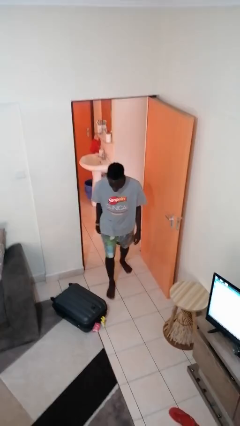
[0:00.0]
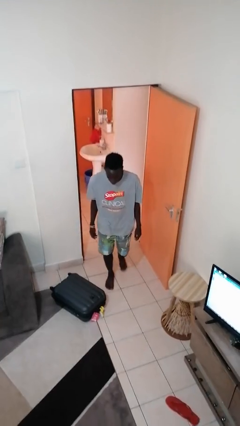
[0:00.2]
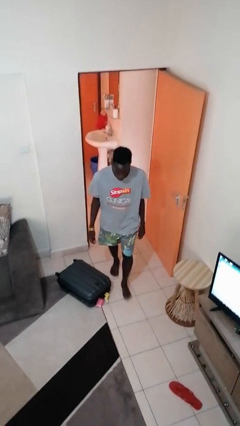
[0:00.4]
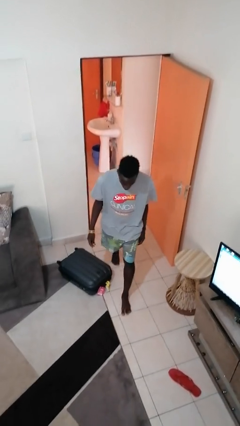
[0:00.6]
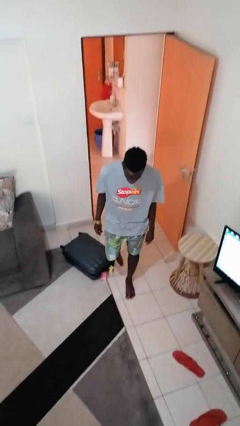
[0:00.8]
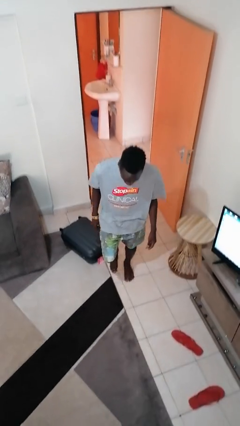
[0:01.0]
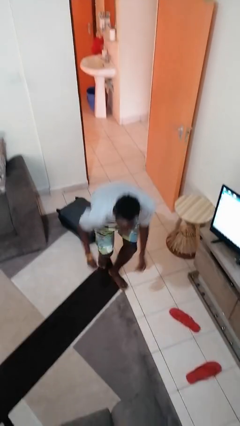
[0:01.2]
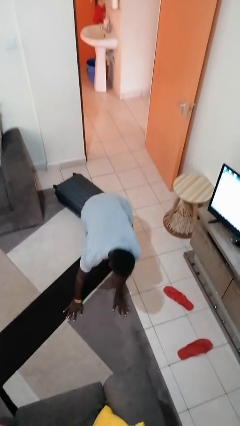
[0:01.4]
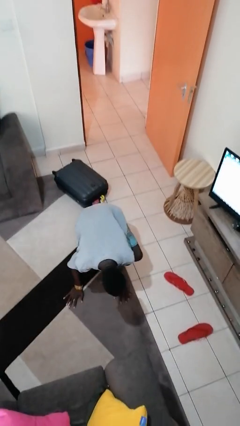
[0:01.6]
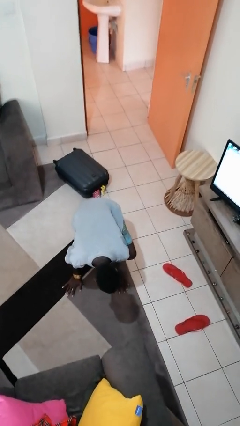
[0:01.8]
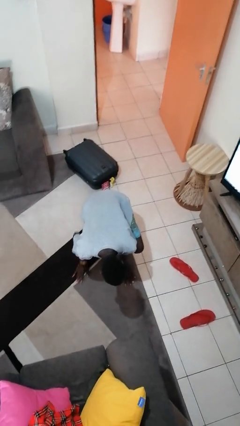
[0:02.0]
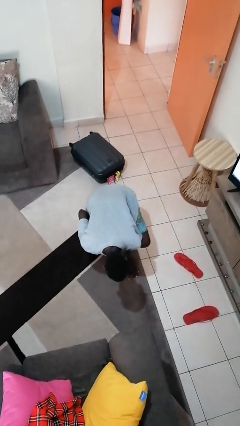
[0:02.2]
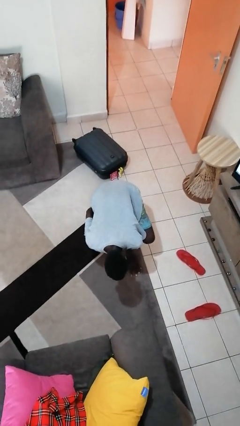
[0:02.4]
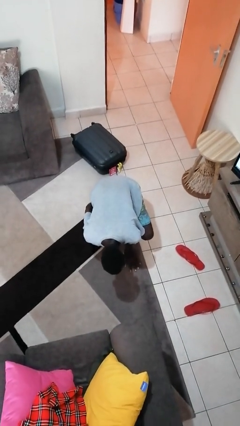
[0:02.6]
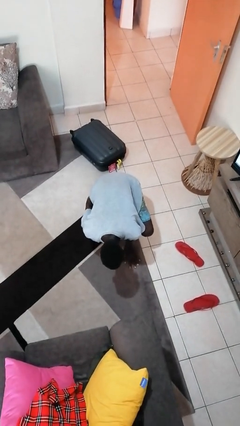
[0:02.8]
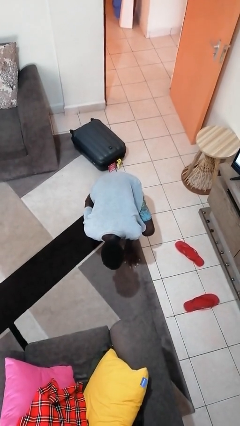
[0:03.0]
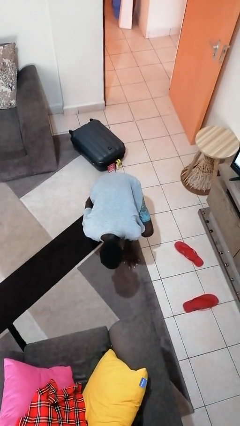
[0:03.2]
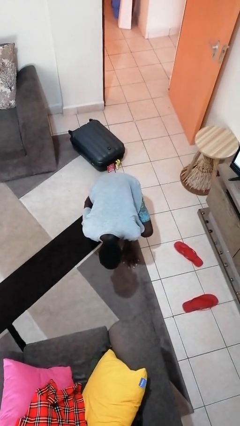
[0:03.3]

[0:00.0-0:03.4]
person trips on object on floor

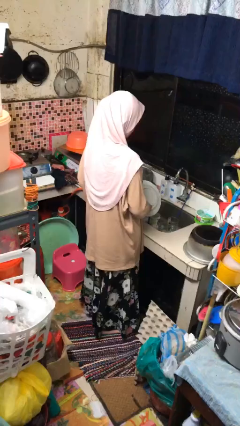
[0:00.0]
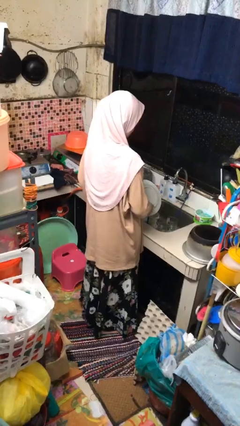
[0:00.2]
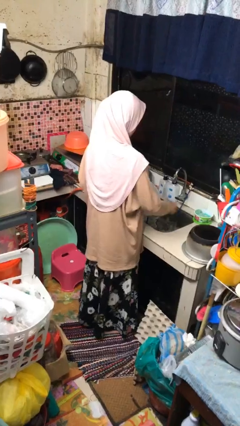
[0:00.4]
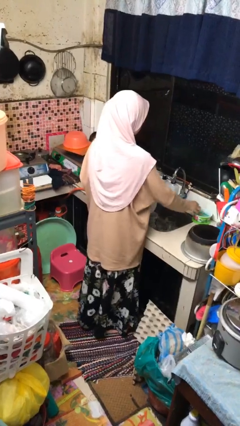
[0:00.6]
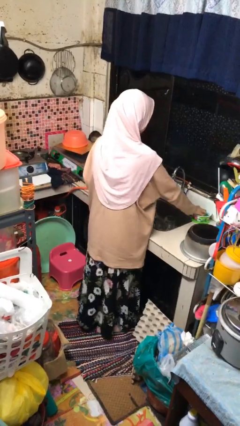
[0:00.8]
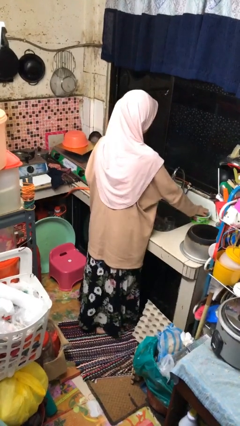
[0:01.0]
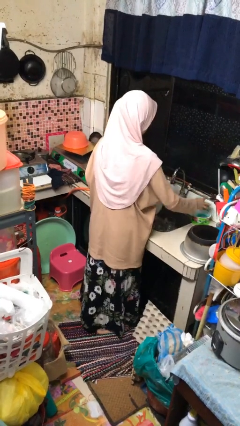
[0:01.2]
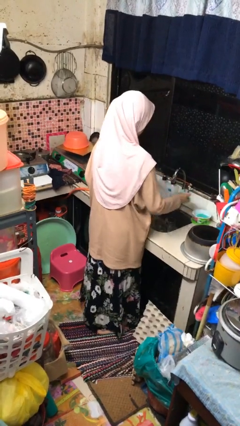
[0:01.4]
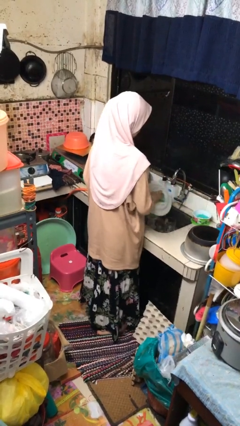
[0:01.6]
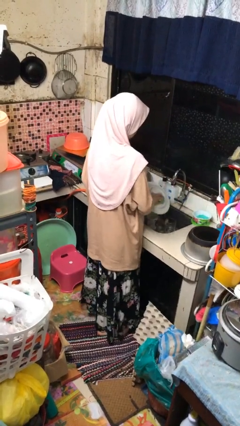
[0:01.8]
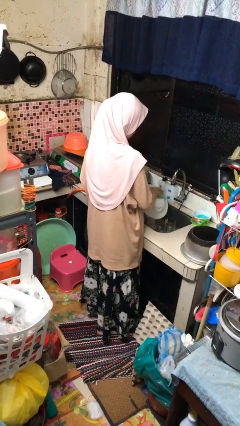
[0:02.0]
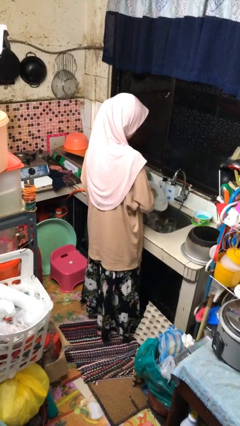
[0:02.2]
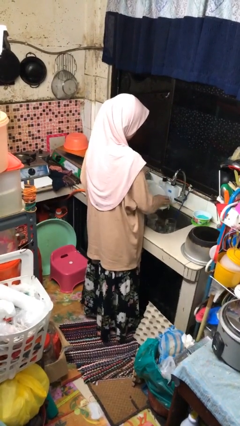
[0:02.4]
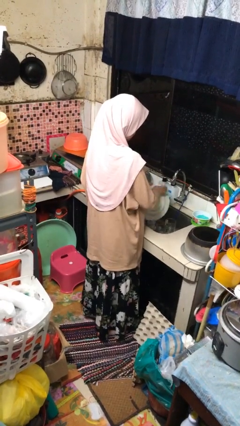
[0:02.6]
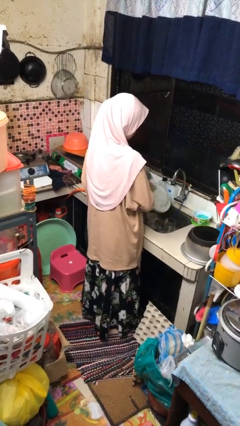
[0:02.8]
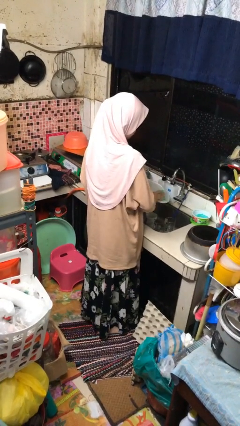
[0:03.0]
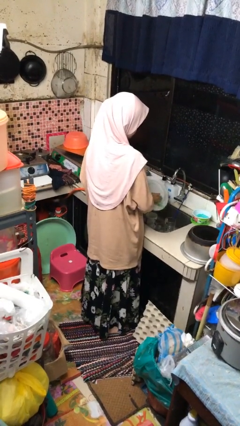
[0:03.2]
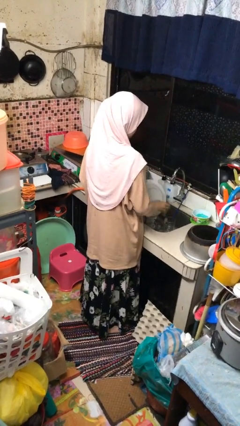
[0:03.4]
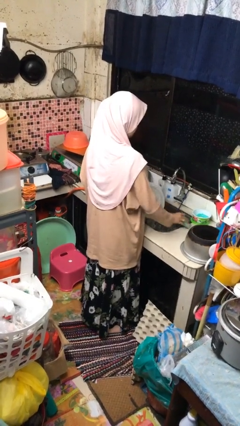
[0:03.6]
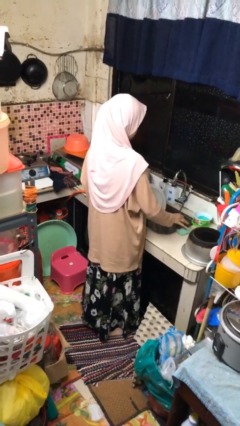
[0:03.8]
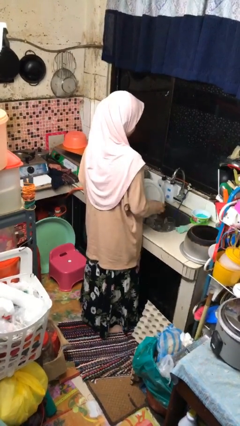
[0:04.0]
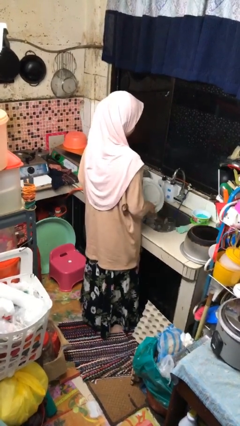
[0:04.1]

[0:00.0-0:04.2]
person washes dish

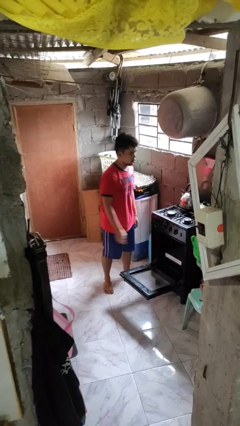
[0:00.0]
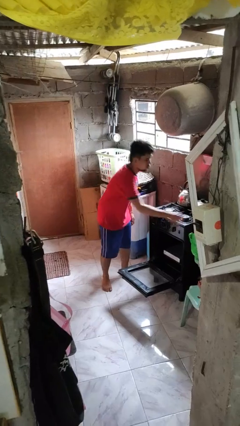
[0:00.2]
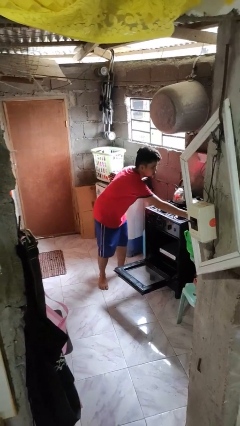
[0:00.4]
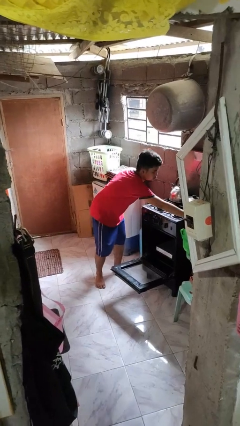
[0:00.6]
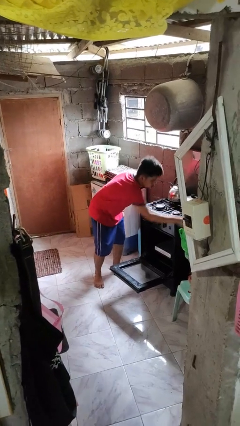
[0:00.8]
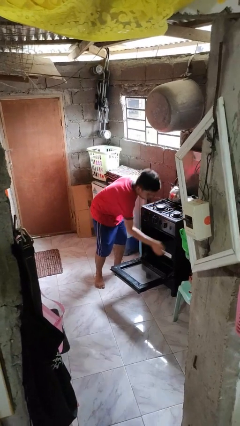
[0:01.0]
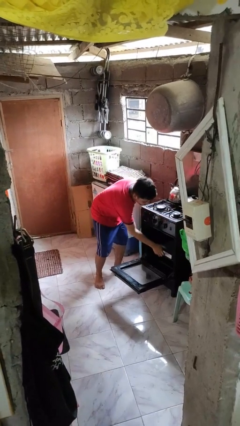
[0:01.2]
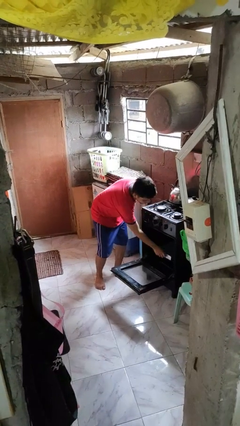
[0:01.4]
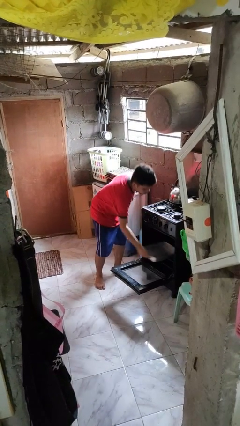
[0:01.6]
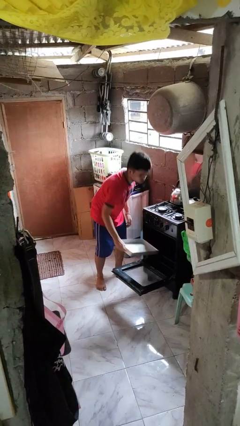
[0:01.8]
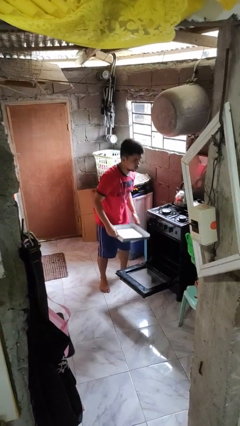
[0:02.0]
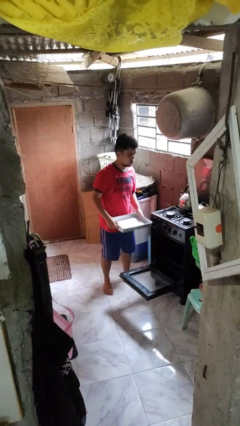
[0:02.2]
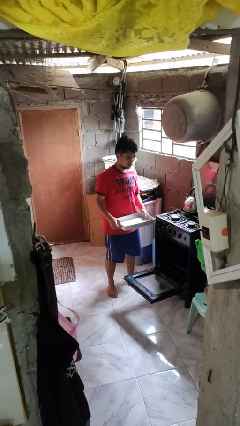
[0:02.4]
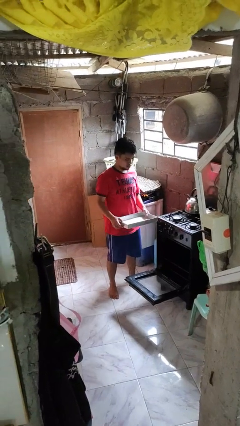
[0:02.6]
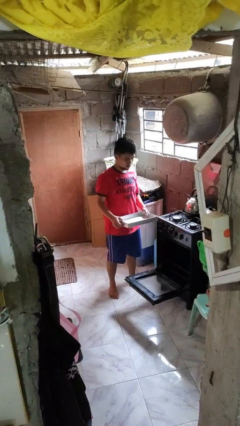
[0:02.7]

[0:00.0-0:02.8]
person takes object from oven

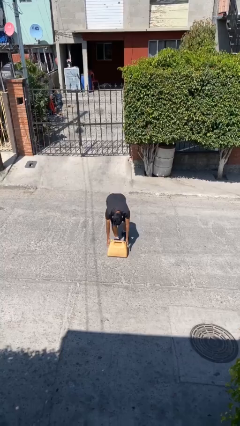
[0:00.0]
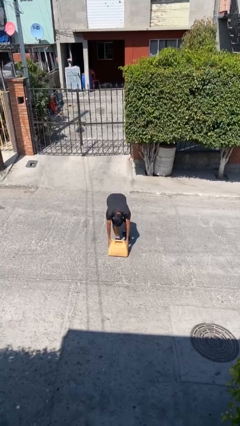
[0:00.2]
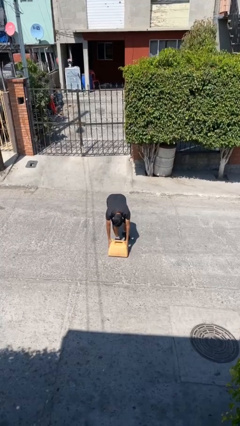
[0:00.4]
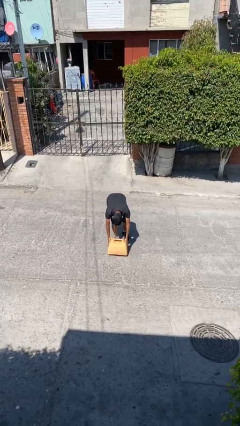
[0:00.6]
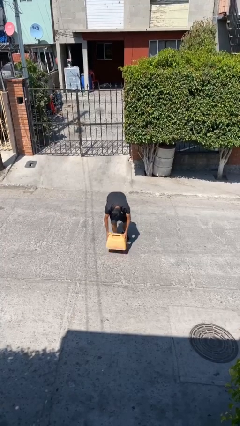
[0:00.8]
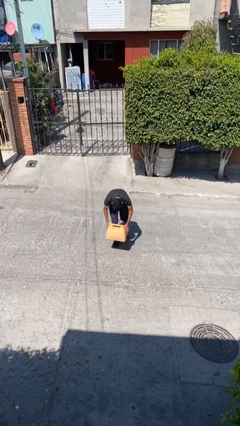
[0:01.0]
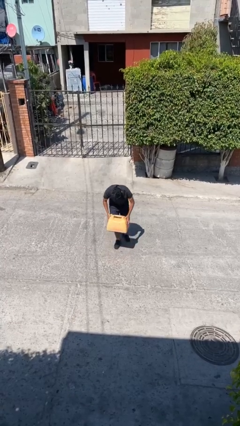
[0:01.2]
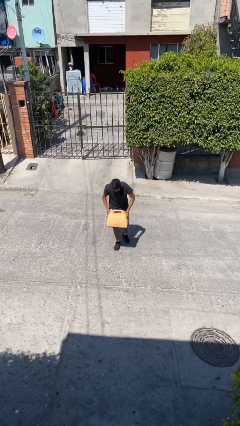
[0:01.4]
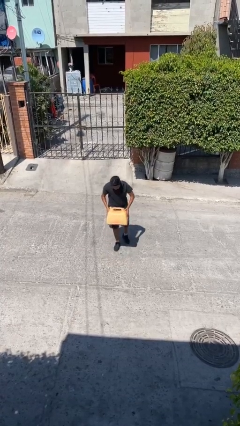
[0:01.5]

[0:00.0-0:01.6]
person picks up object from floor

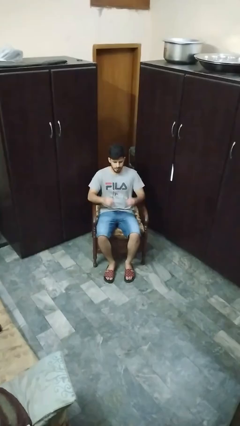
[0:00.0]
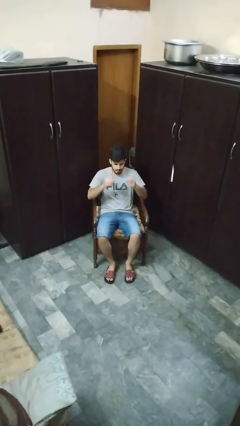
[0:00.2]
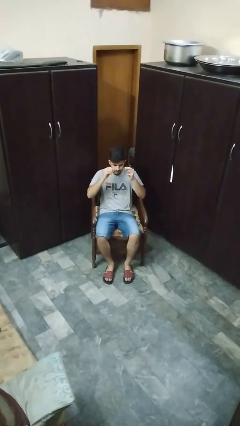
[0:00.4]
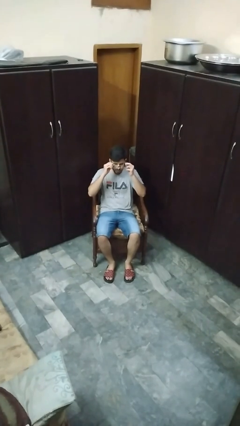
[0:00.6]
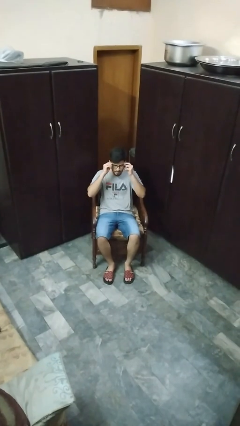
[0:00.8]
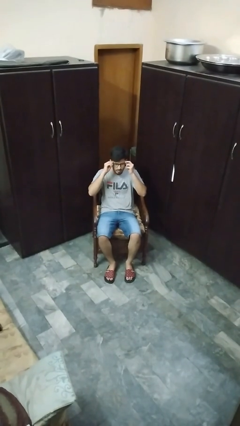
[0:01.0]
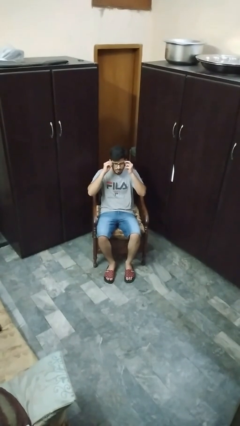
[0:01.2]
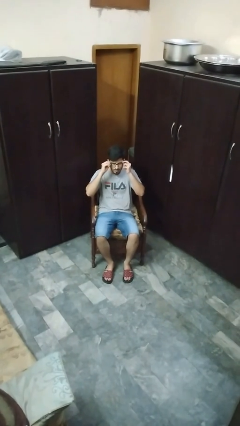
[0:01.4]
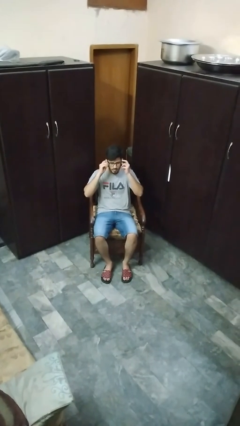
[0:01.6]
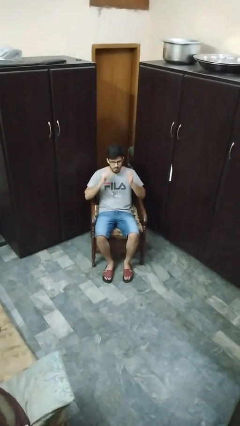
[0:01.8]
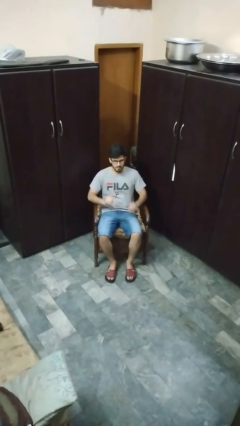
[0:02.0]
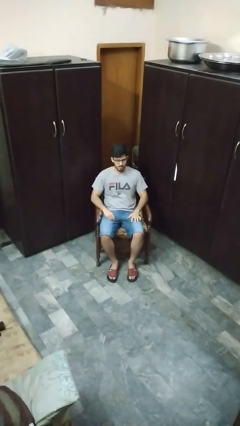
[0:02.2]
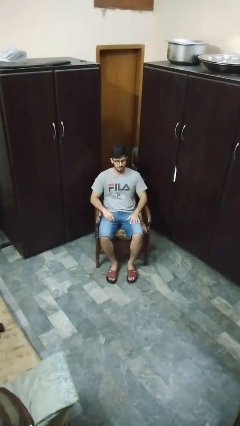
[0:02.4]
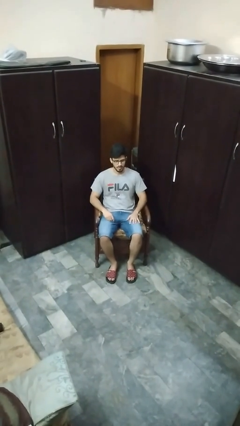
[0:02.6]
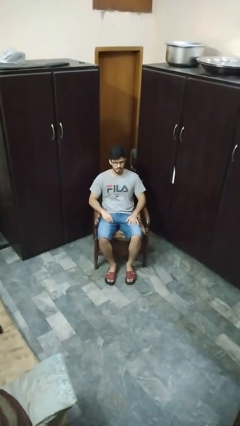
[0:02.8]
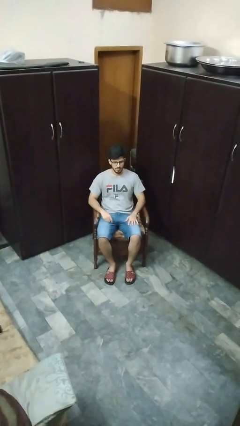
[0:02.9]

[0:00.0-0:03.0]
person puts on glasses

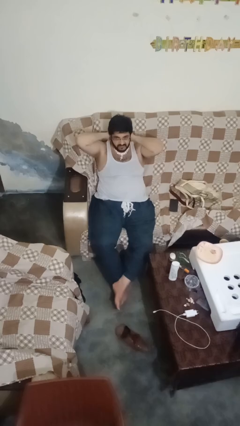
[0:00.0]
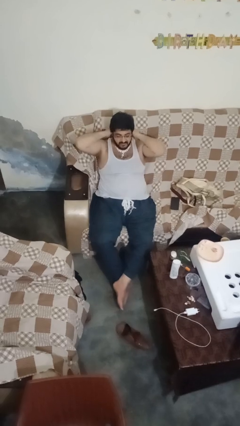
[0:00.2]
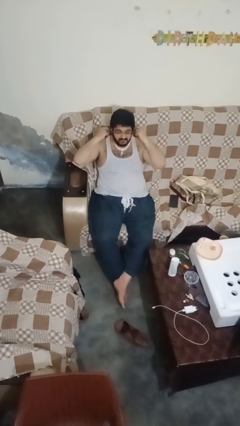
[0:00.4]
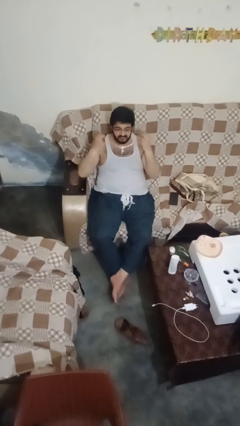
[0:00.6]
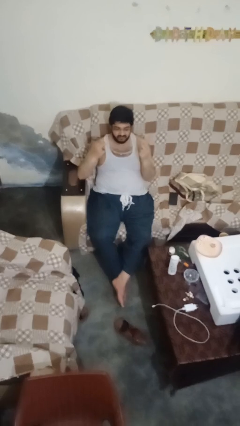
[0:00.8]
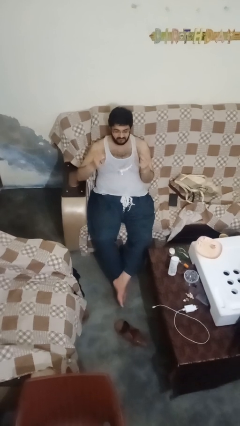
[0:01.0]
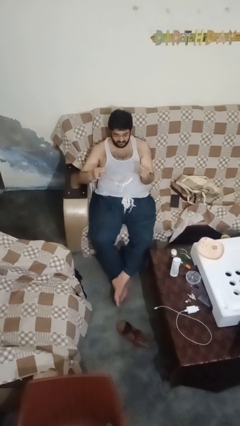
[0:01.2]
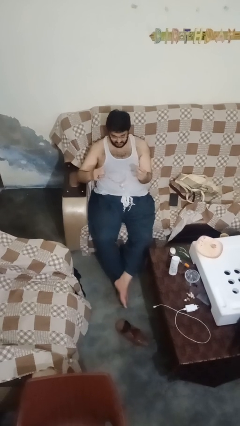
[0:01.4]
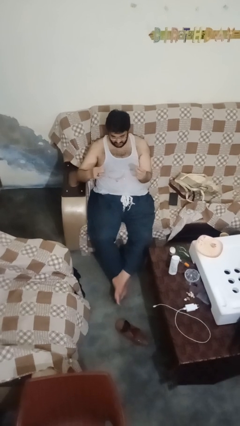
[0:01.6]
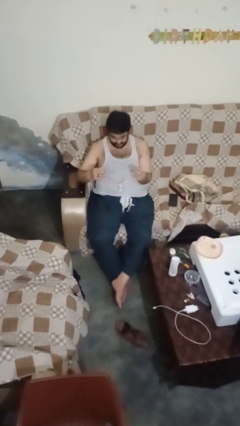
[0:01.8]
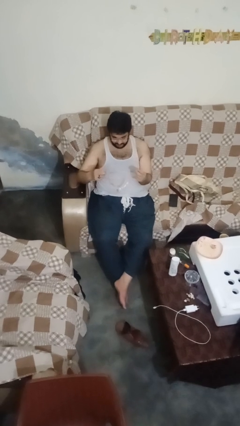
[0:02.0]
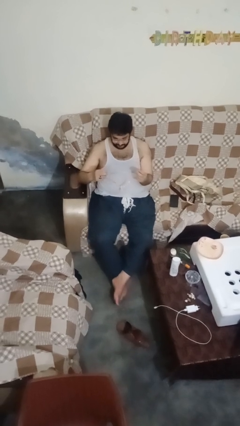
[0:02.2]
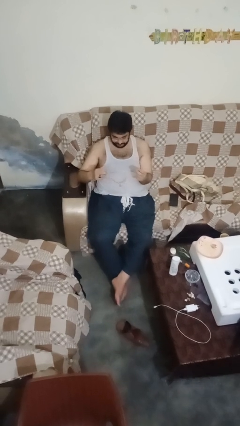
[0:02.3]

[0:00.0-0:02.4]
person takes off necklace

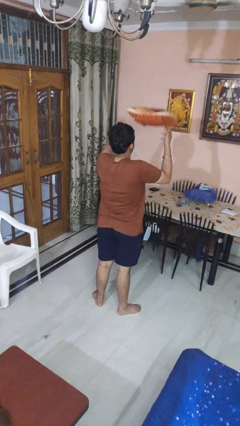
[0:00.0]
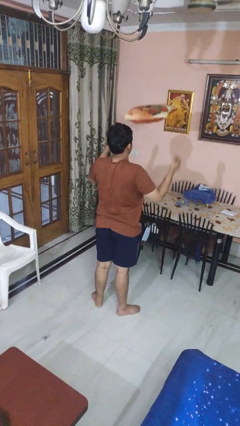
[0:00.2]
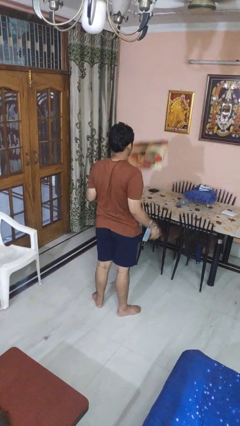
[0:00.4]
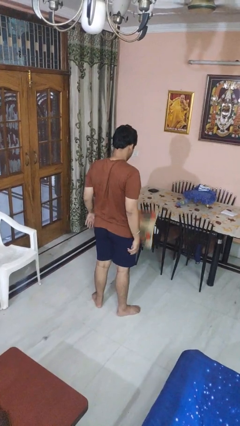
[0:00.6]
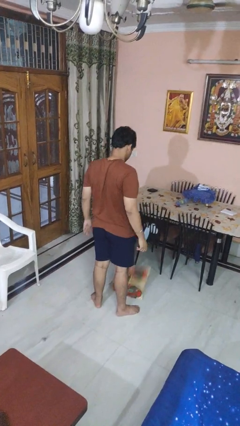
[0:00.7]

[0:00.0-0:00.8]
person throws object into air
